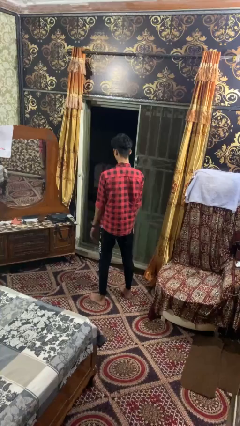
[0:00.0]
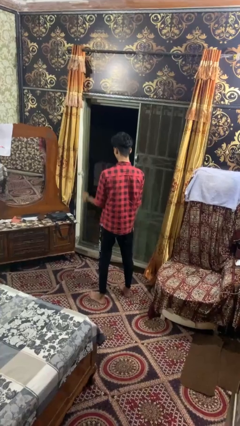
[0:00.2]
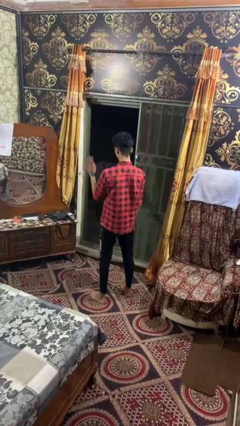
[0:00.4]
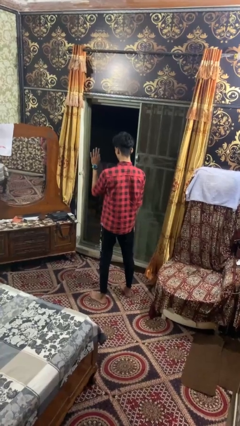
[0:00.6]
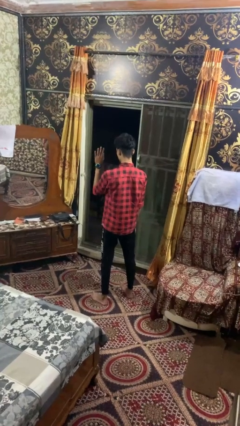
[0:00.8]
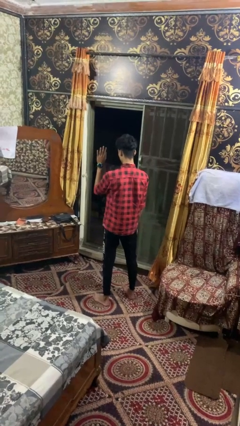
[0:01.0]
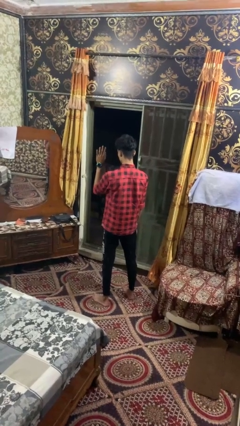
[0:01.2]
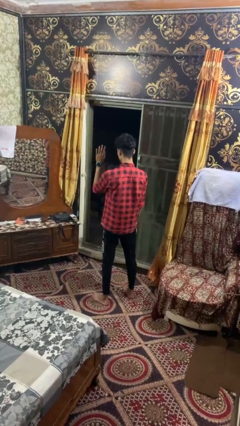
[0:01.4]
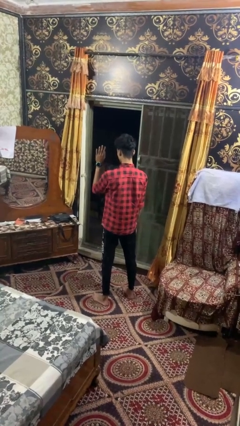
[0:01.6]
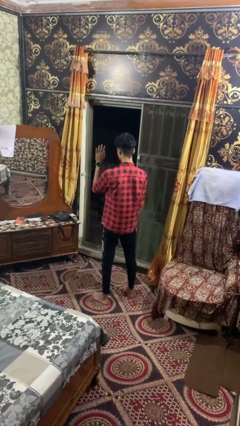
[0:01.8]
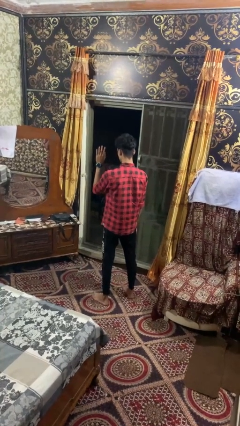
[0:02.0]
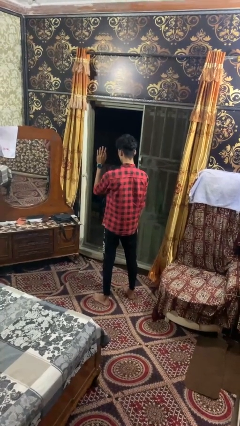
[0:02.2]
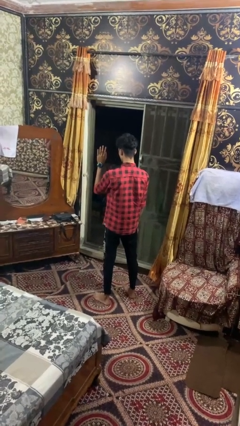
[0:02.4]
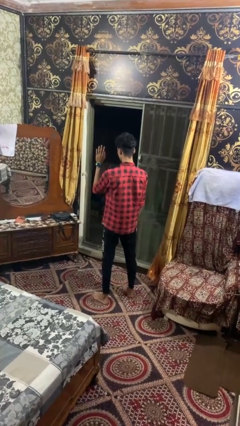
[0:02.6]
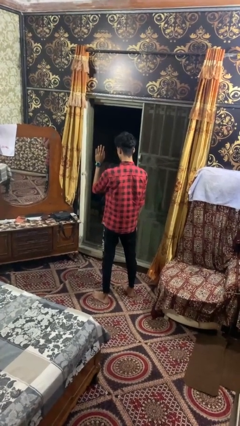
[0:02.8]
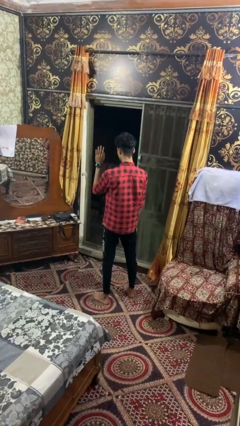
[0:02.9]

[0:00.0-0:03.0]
person gestures swipe left

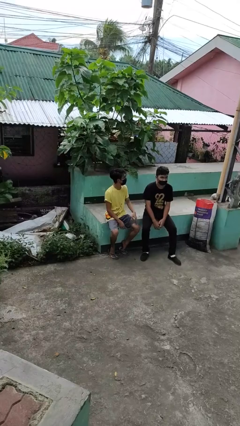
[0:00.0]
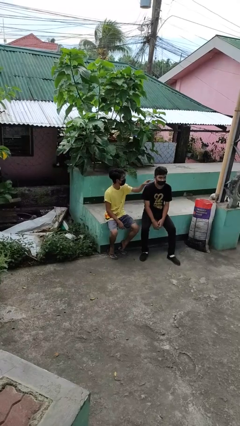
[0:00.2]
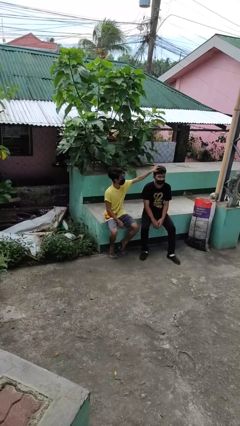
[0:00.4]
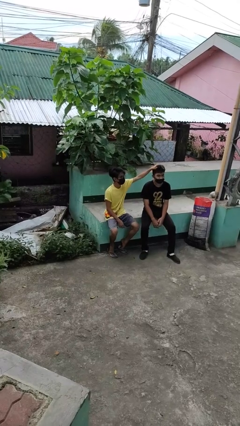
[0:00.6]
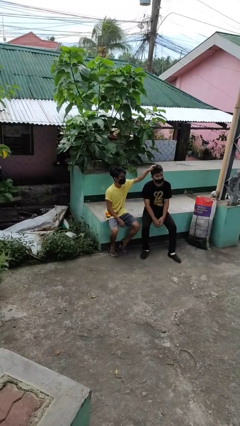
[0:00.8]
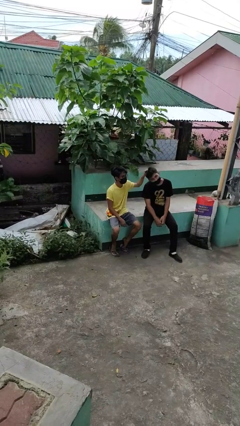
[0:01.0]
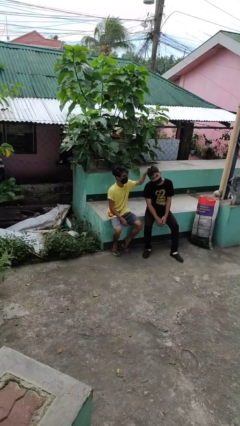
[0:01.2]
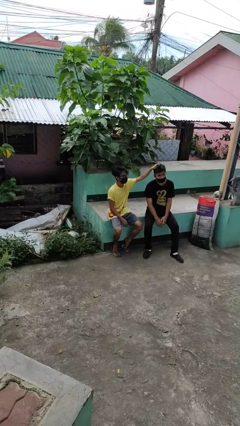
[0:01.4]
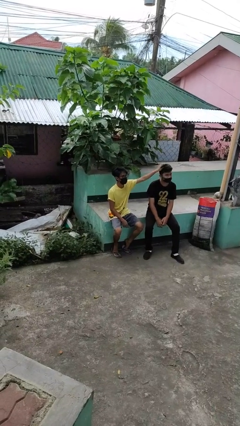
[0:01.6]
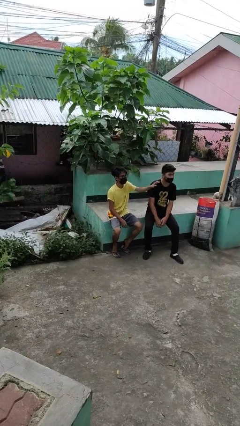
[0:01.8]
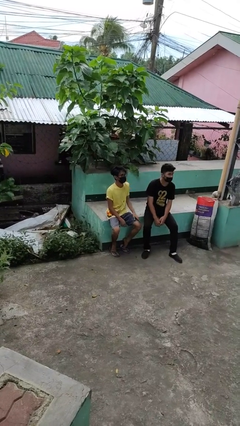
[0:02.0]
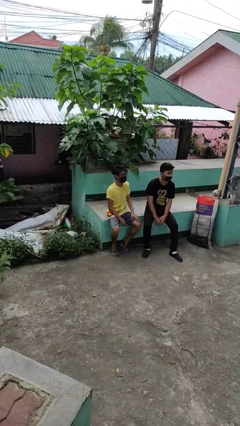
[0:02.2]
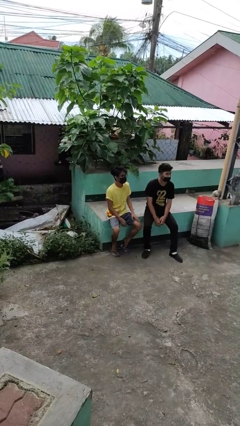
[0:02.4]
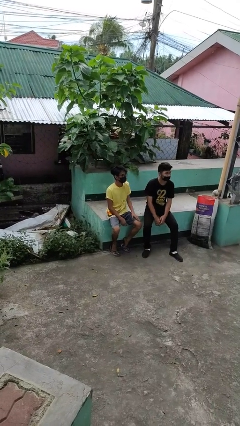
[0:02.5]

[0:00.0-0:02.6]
person grabs person by hair

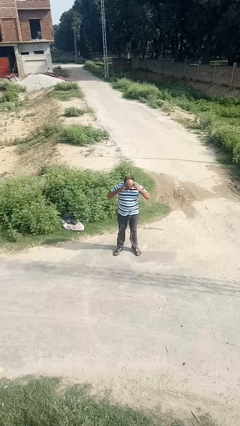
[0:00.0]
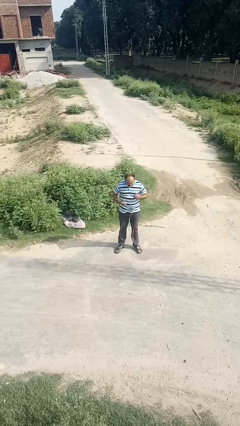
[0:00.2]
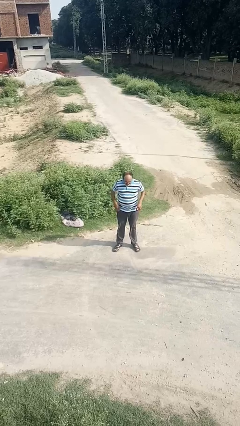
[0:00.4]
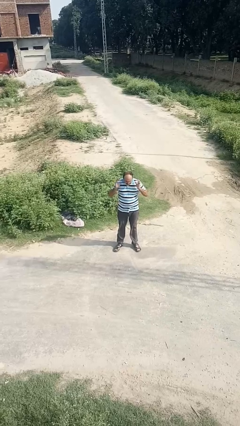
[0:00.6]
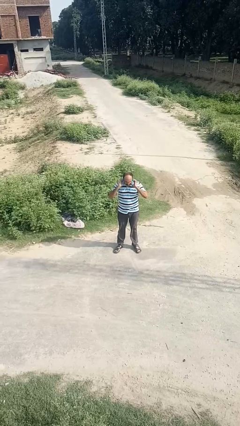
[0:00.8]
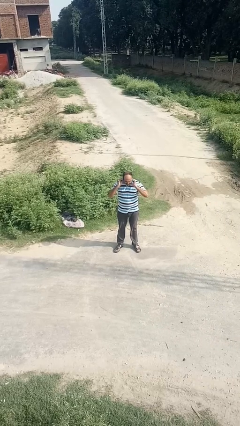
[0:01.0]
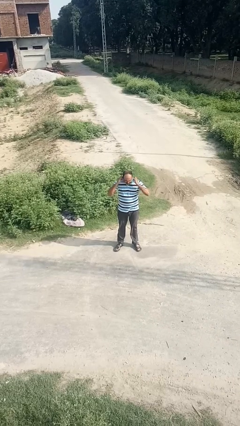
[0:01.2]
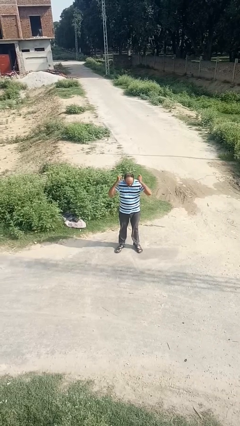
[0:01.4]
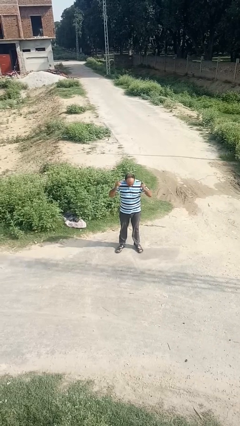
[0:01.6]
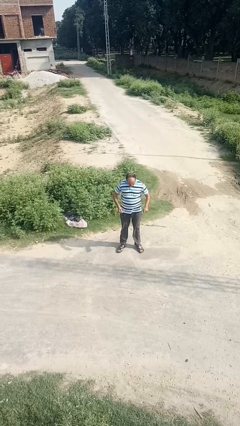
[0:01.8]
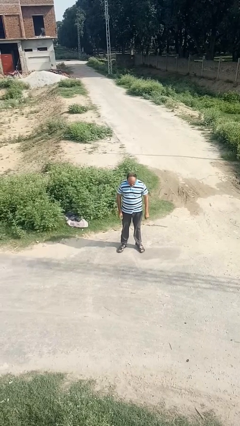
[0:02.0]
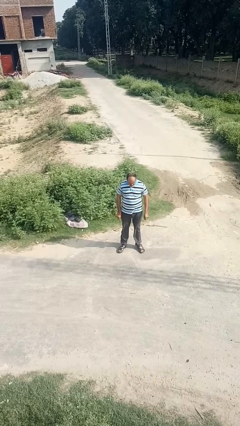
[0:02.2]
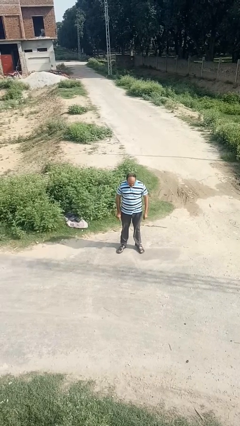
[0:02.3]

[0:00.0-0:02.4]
person takes off earrings

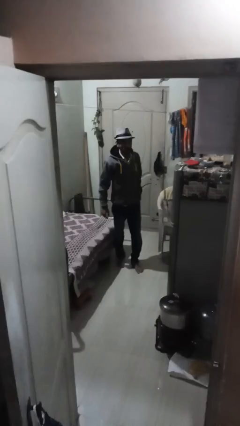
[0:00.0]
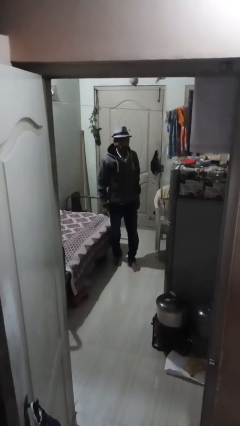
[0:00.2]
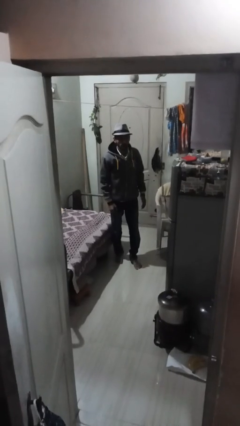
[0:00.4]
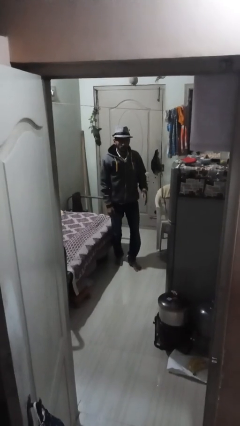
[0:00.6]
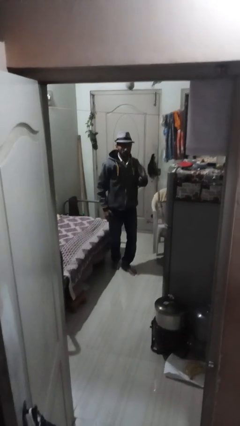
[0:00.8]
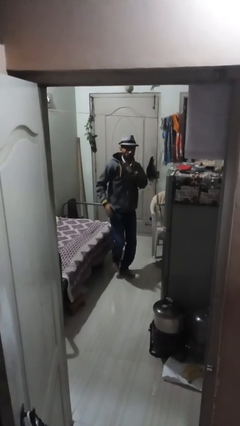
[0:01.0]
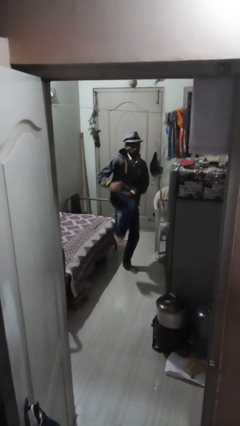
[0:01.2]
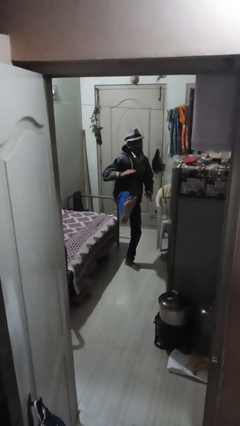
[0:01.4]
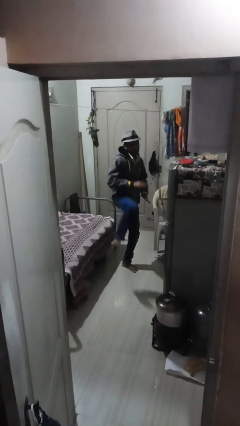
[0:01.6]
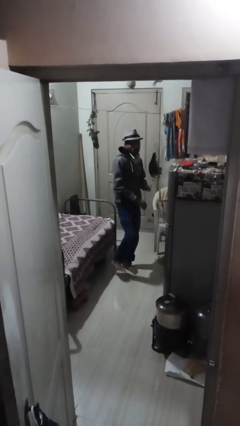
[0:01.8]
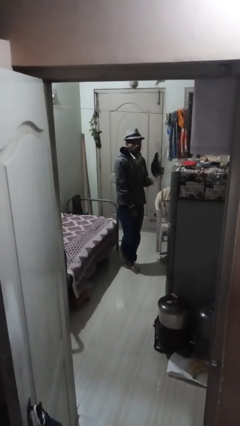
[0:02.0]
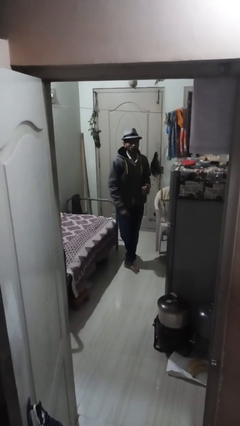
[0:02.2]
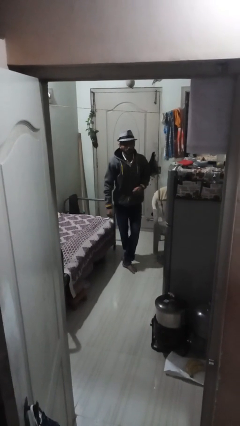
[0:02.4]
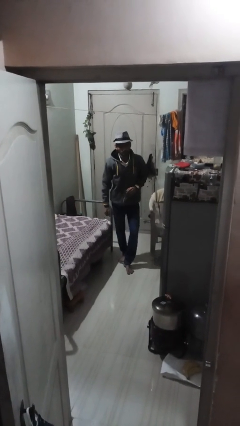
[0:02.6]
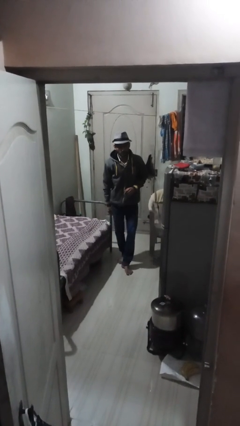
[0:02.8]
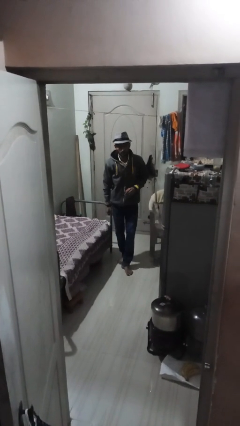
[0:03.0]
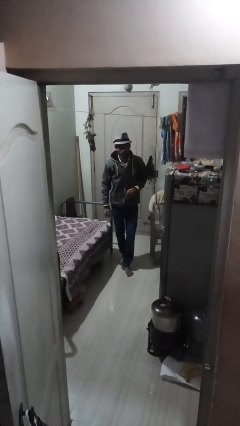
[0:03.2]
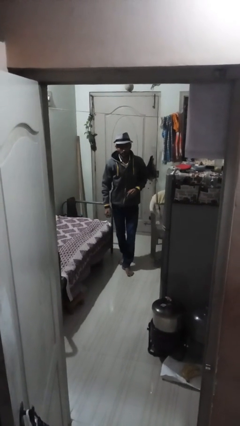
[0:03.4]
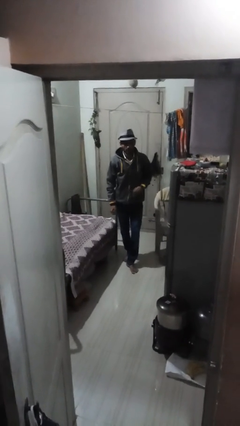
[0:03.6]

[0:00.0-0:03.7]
person karate kicks

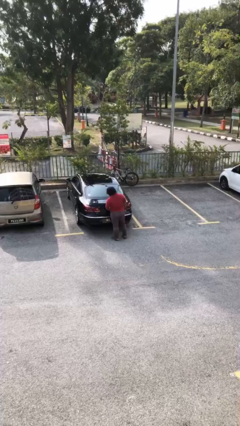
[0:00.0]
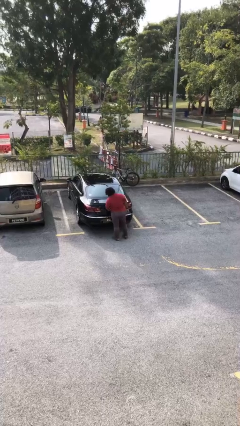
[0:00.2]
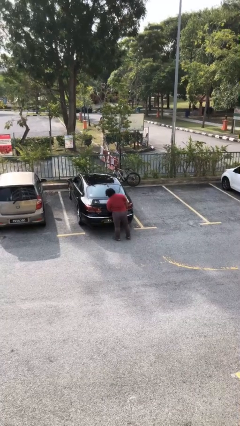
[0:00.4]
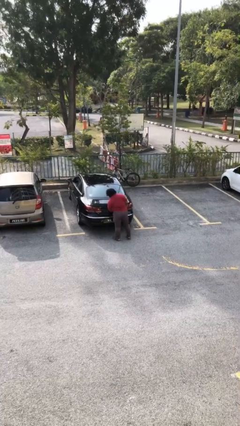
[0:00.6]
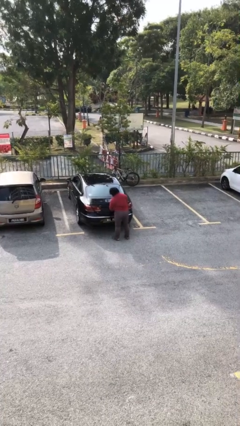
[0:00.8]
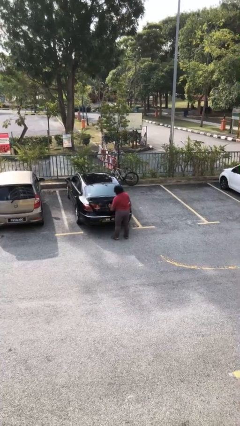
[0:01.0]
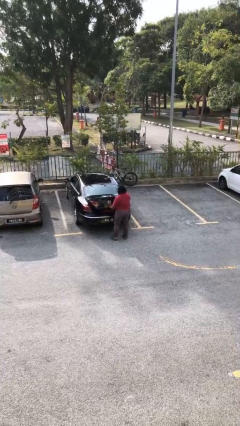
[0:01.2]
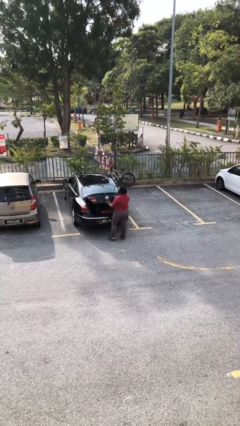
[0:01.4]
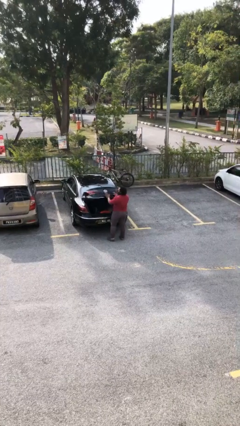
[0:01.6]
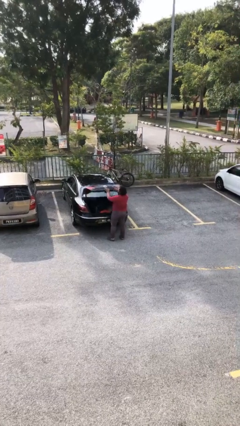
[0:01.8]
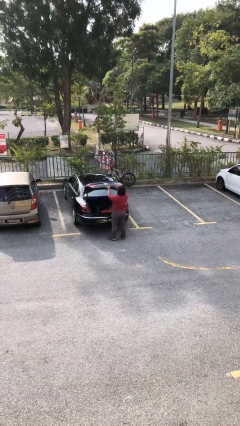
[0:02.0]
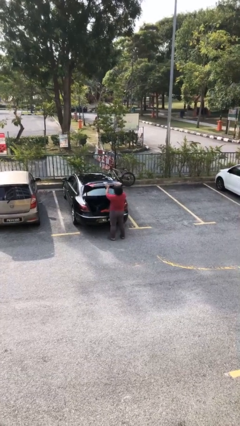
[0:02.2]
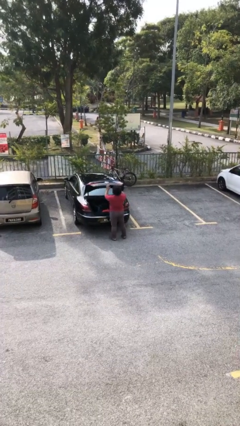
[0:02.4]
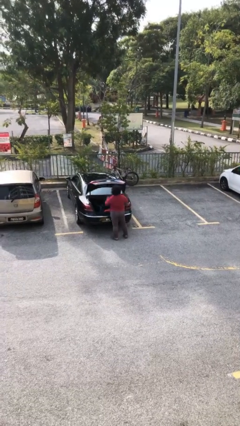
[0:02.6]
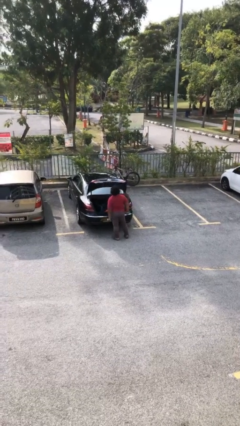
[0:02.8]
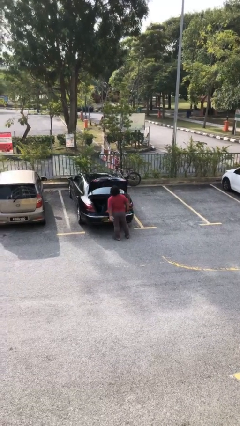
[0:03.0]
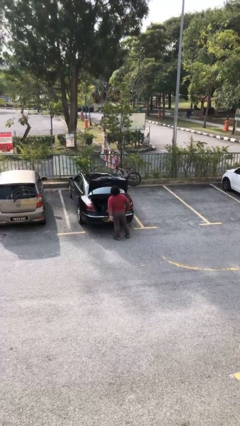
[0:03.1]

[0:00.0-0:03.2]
person opens car trunk

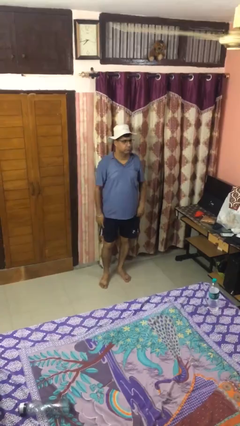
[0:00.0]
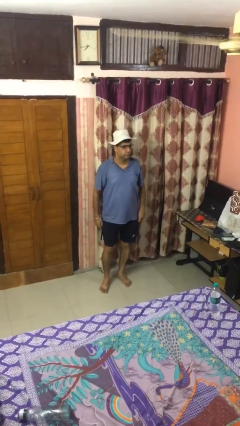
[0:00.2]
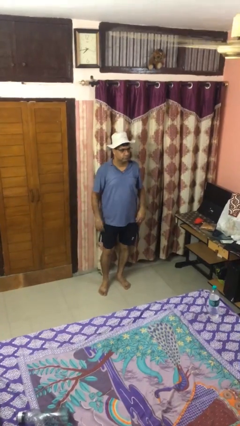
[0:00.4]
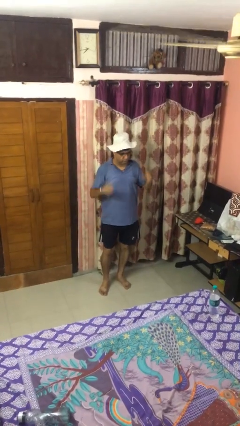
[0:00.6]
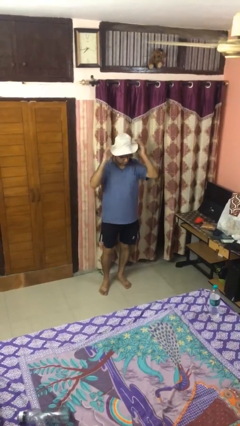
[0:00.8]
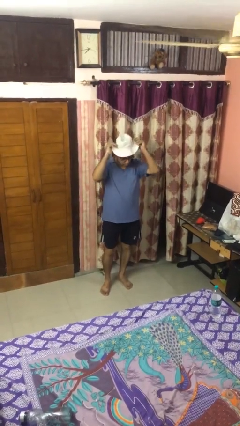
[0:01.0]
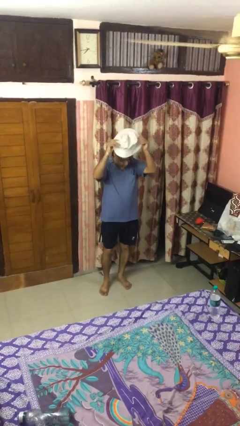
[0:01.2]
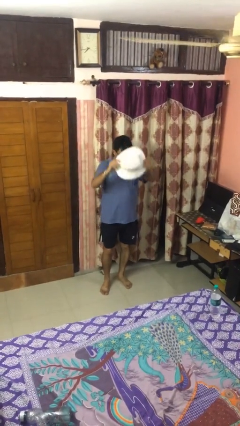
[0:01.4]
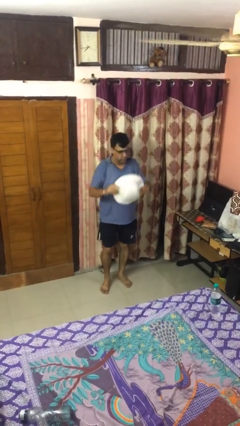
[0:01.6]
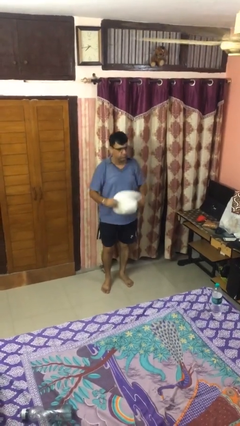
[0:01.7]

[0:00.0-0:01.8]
person takes off hat

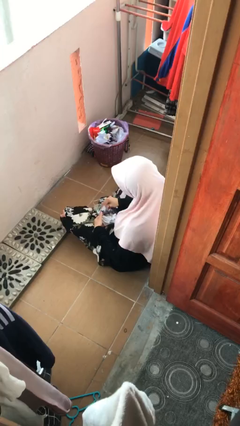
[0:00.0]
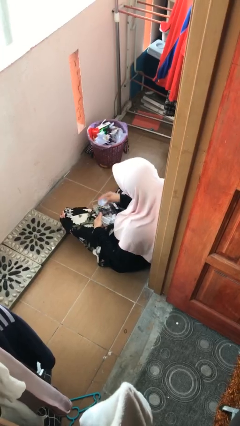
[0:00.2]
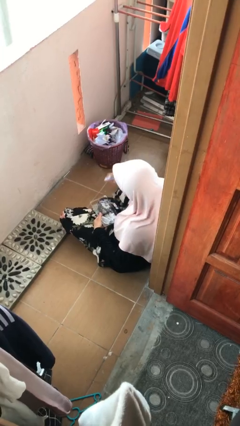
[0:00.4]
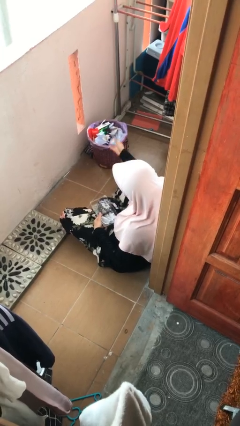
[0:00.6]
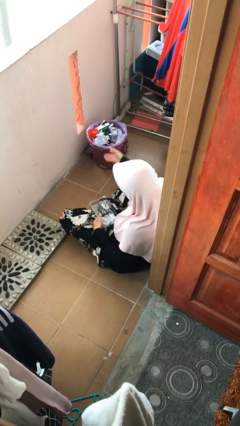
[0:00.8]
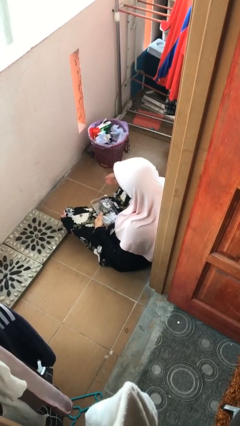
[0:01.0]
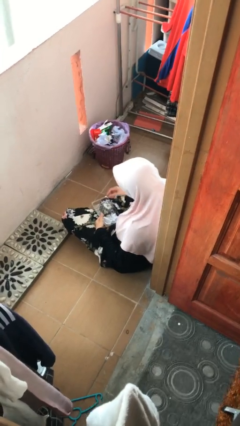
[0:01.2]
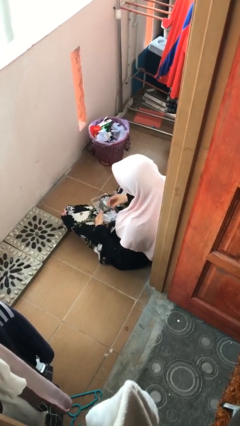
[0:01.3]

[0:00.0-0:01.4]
person discards trash
